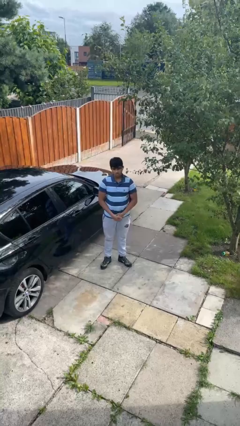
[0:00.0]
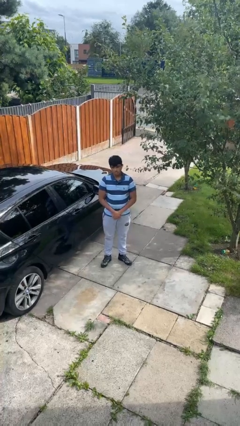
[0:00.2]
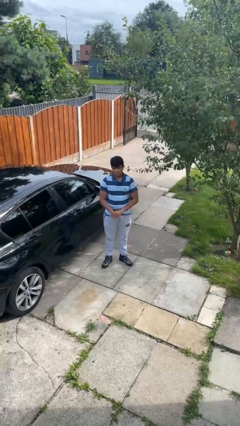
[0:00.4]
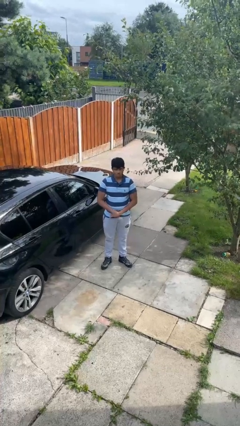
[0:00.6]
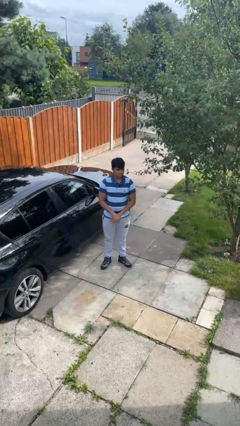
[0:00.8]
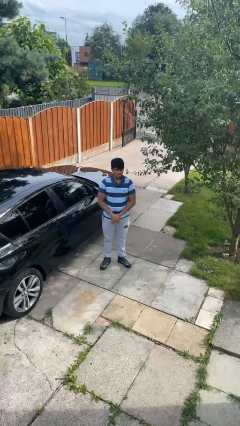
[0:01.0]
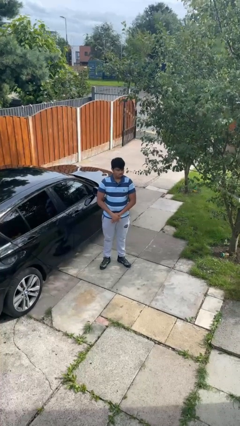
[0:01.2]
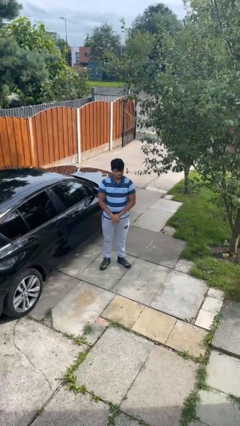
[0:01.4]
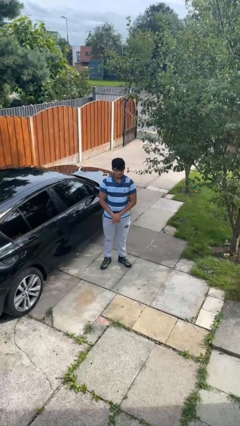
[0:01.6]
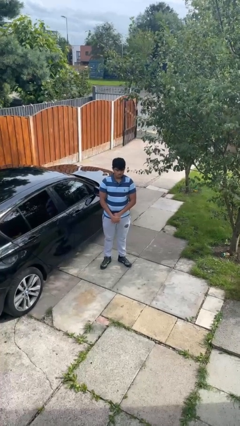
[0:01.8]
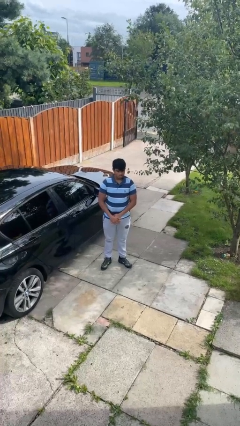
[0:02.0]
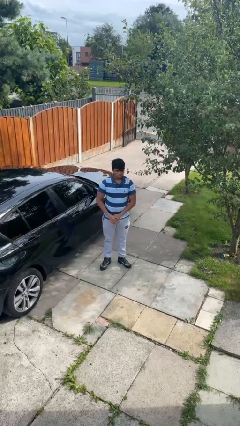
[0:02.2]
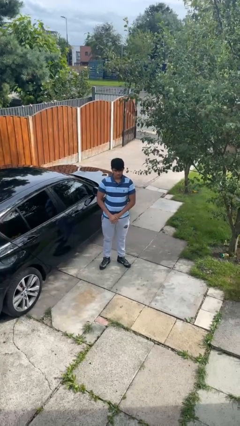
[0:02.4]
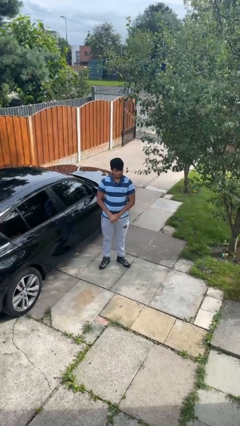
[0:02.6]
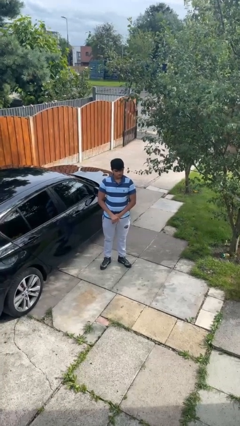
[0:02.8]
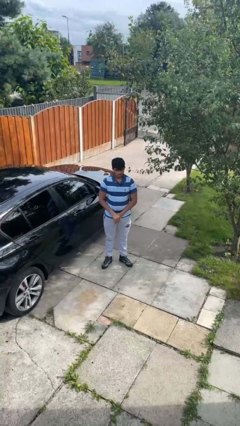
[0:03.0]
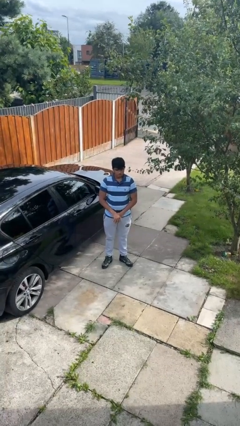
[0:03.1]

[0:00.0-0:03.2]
person shakes head

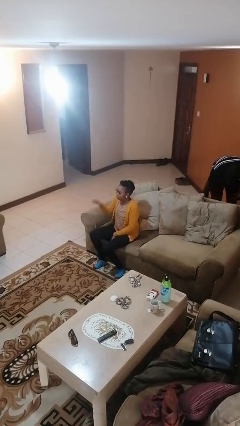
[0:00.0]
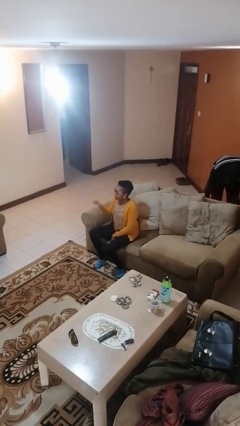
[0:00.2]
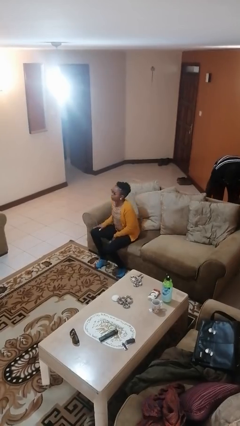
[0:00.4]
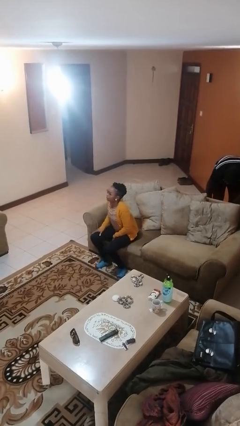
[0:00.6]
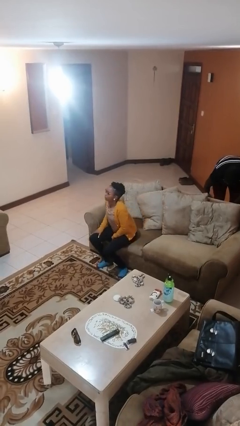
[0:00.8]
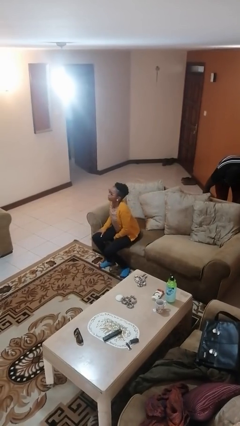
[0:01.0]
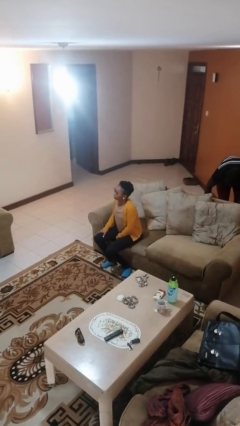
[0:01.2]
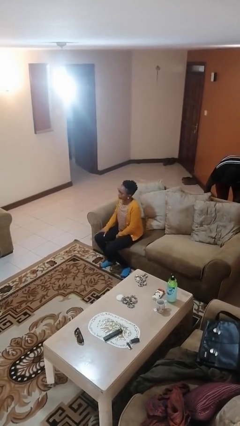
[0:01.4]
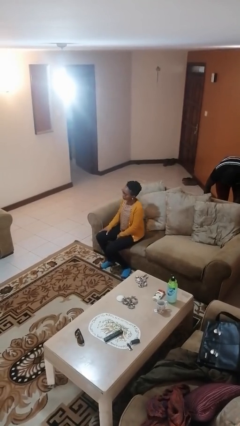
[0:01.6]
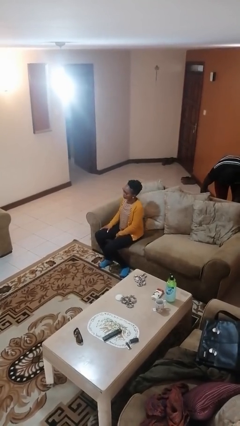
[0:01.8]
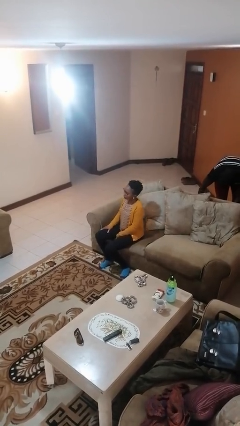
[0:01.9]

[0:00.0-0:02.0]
person slaps hands on thighs

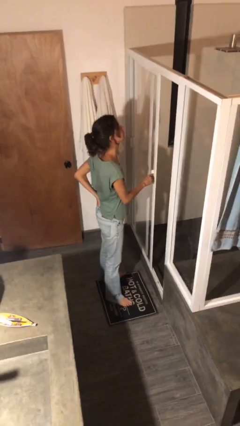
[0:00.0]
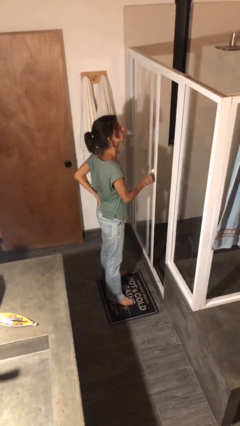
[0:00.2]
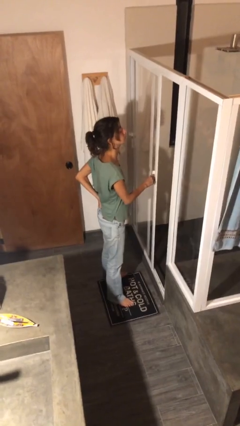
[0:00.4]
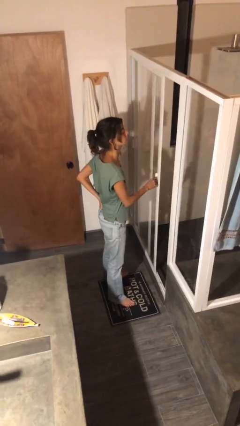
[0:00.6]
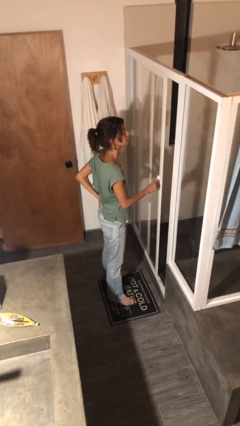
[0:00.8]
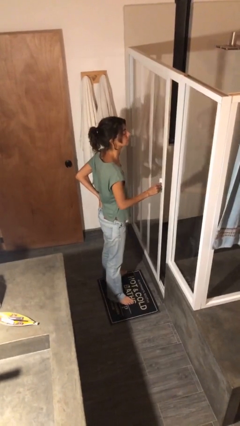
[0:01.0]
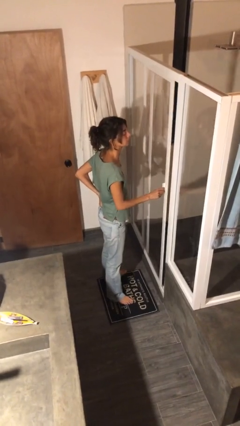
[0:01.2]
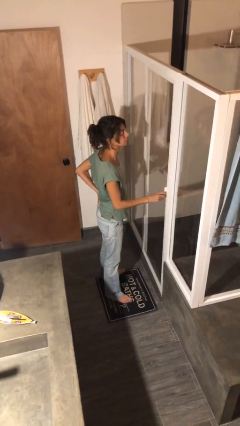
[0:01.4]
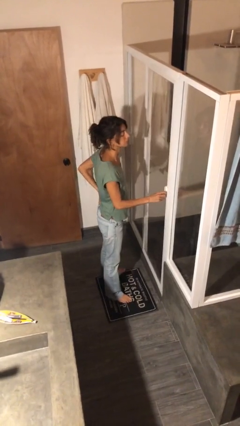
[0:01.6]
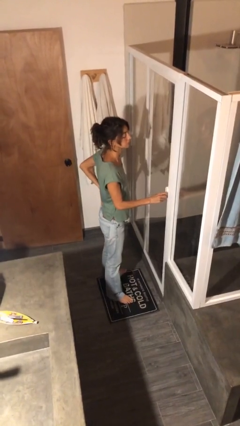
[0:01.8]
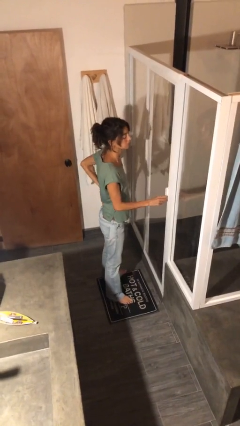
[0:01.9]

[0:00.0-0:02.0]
person closes sliding door

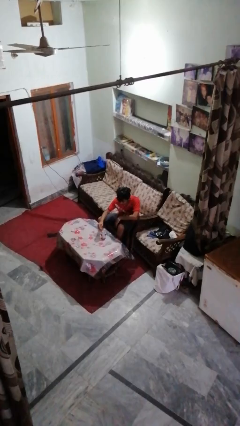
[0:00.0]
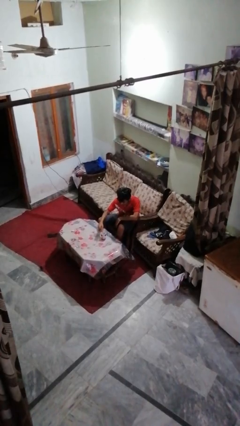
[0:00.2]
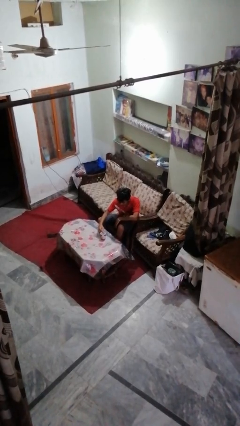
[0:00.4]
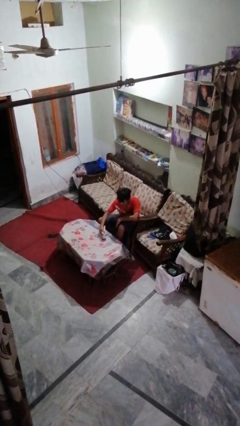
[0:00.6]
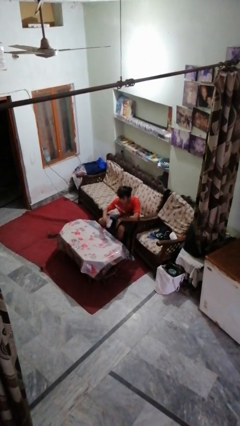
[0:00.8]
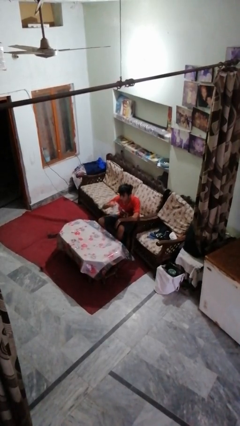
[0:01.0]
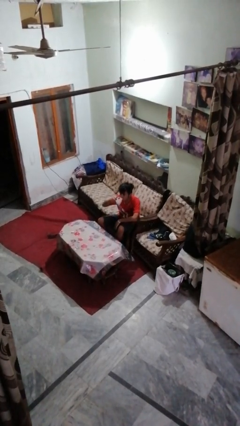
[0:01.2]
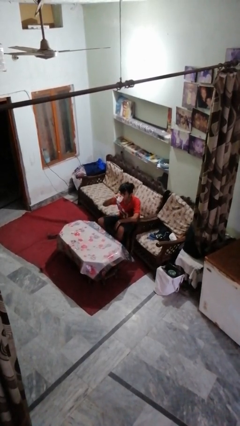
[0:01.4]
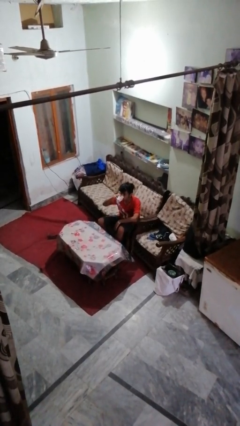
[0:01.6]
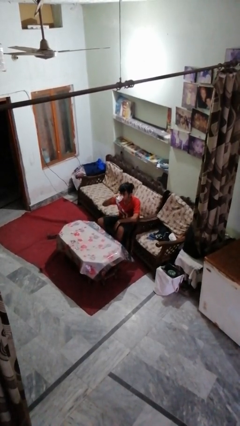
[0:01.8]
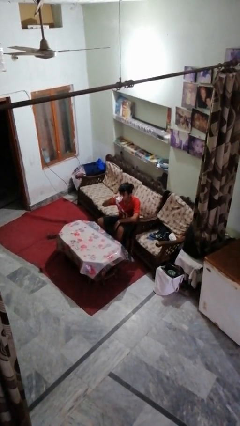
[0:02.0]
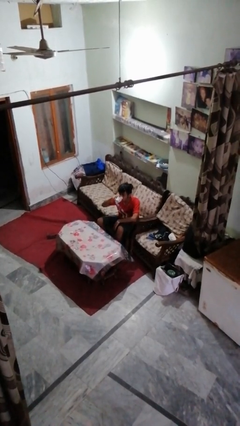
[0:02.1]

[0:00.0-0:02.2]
person drinks from mug

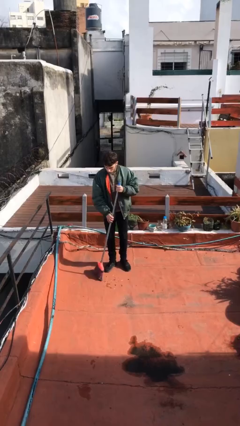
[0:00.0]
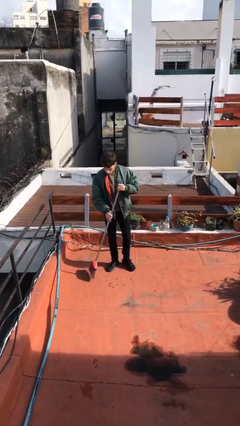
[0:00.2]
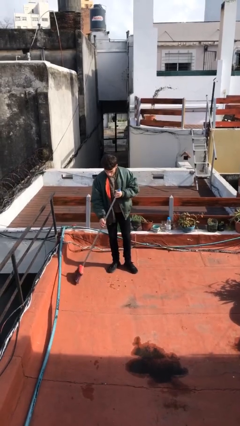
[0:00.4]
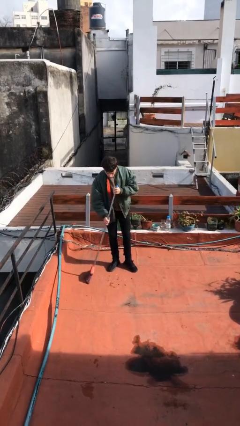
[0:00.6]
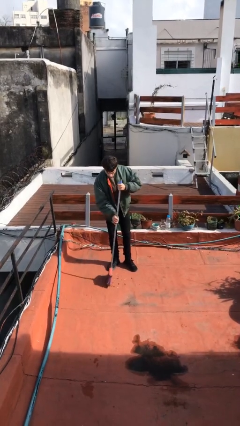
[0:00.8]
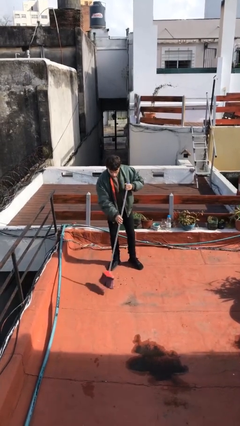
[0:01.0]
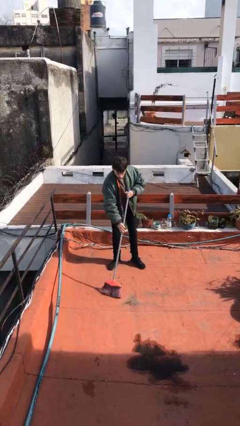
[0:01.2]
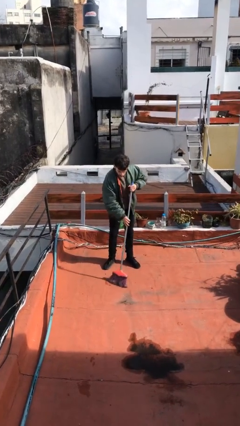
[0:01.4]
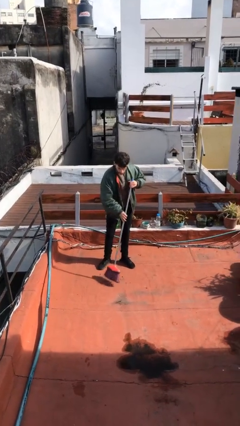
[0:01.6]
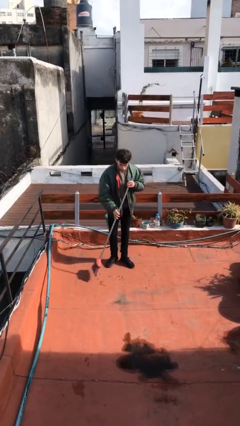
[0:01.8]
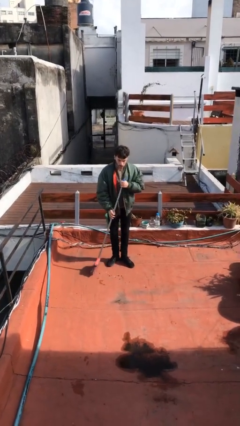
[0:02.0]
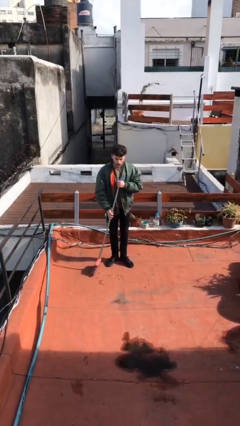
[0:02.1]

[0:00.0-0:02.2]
person sweeps floor

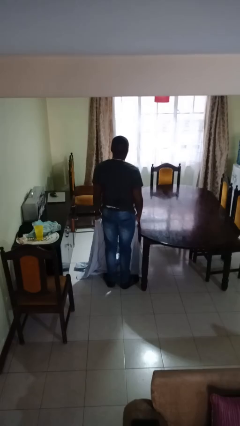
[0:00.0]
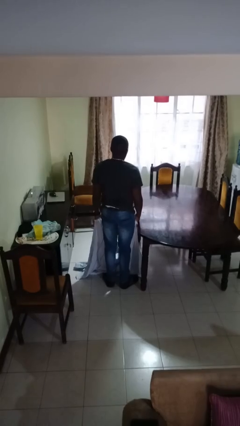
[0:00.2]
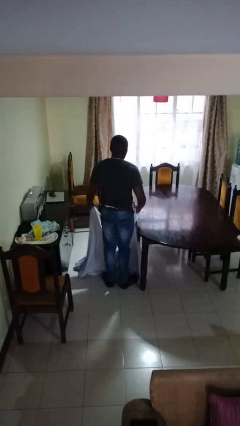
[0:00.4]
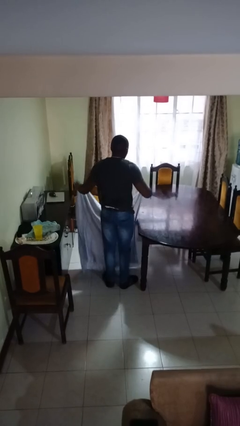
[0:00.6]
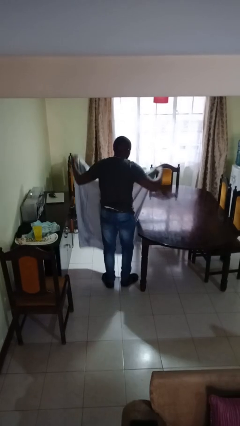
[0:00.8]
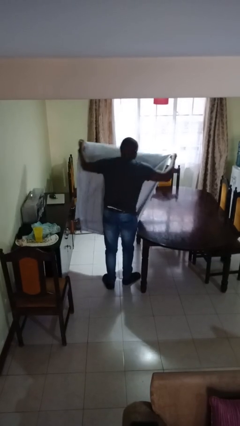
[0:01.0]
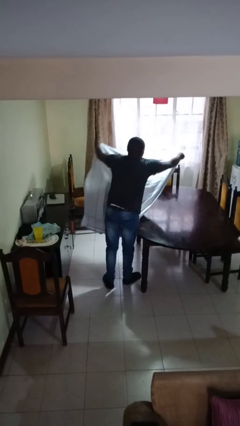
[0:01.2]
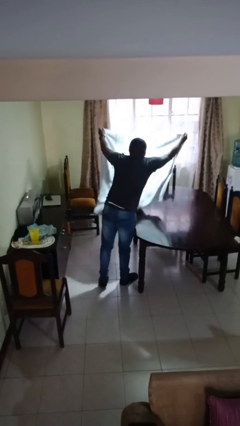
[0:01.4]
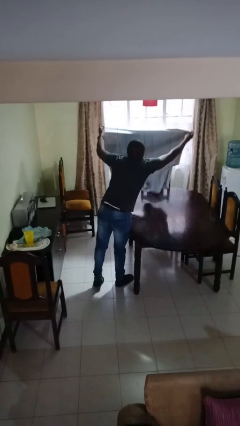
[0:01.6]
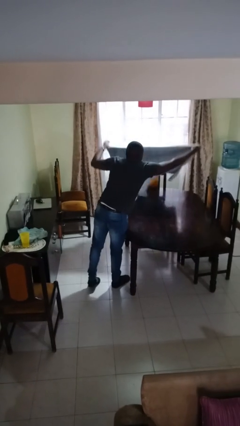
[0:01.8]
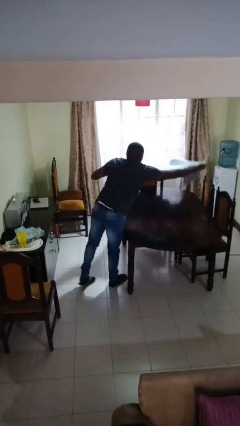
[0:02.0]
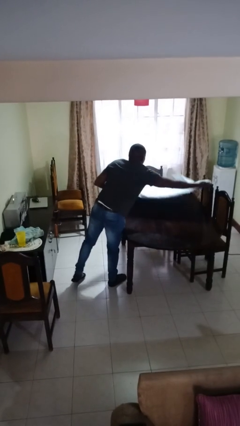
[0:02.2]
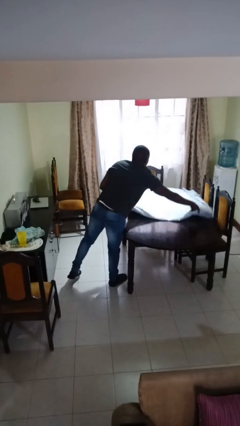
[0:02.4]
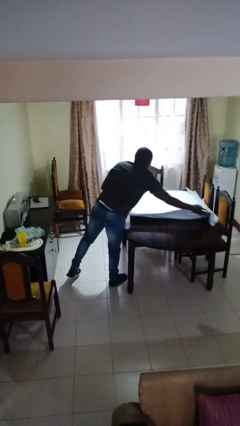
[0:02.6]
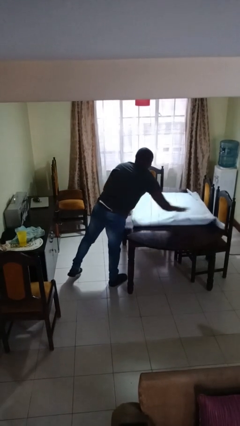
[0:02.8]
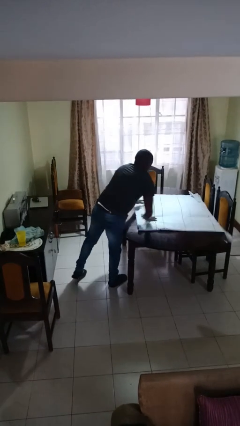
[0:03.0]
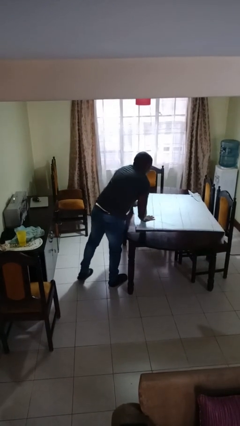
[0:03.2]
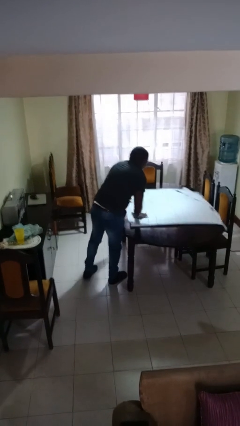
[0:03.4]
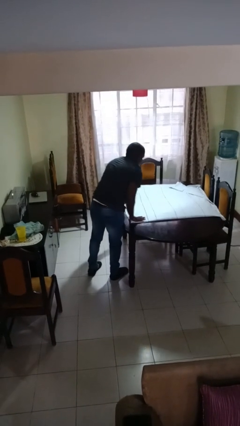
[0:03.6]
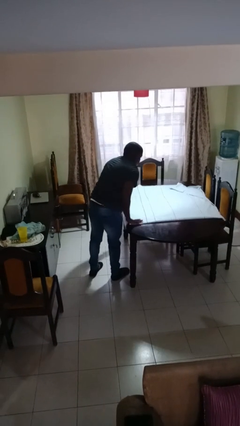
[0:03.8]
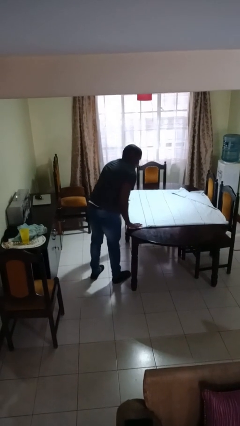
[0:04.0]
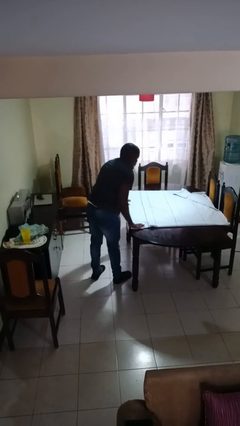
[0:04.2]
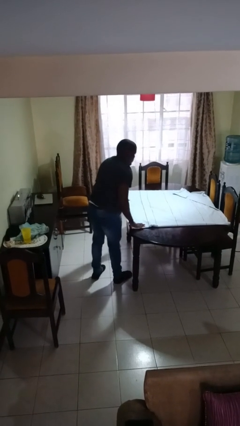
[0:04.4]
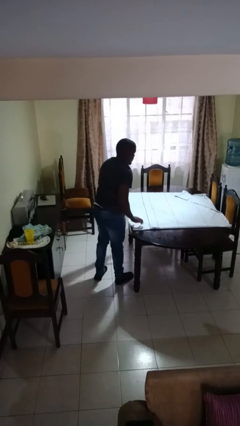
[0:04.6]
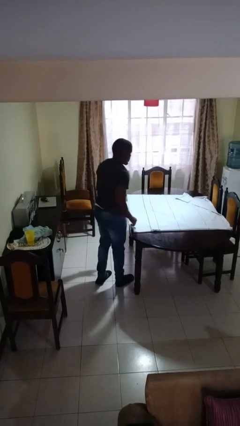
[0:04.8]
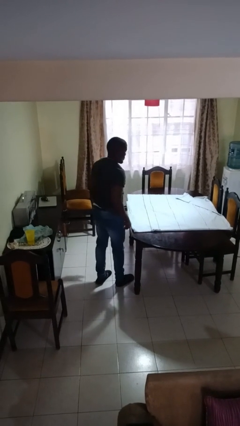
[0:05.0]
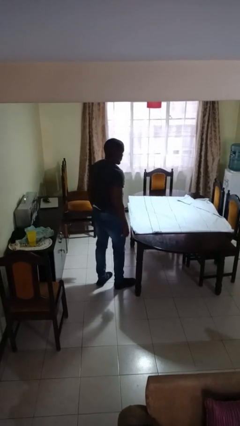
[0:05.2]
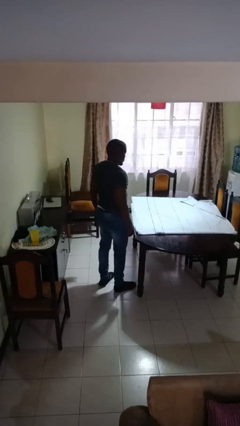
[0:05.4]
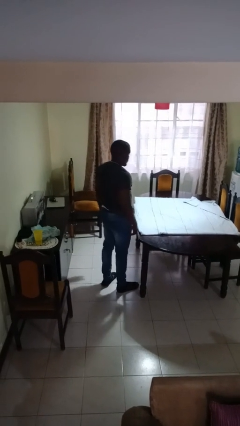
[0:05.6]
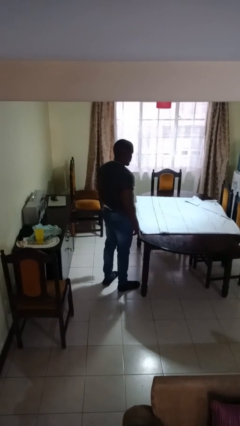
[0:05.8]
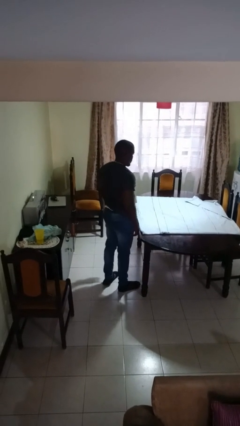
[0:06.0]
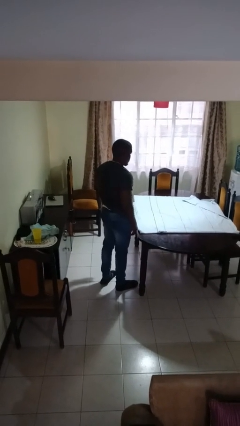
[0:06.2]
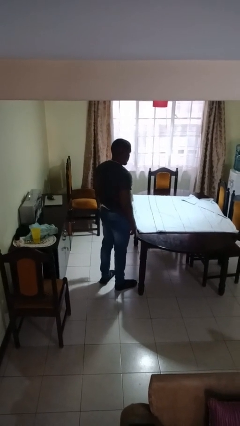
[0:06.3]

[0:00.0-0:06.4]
person spreads tablecloth
